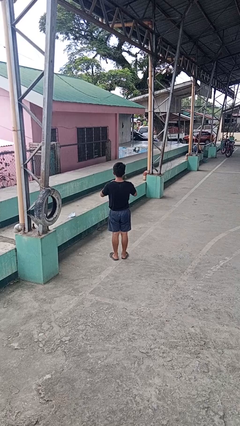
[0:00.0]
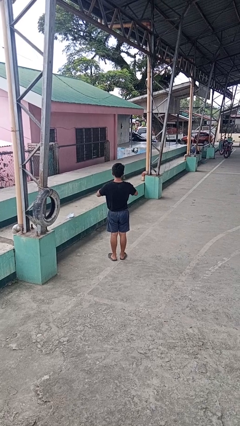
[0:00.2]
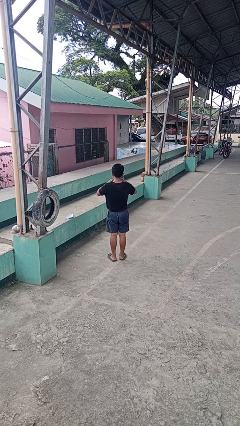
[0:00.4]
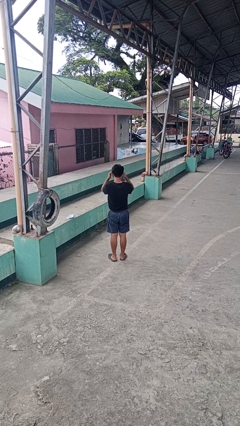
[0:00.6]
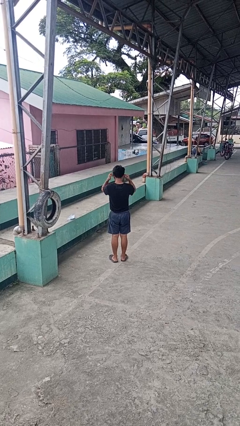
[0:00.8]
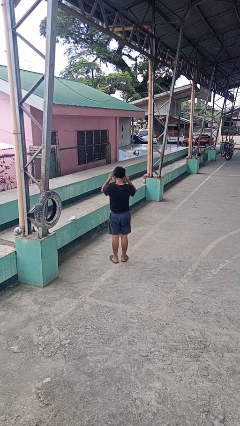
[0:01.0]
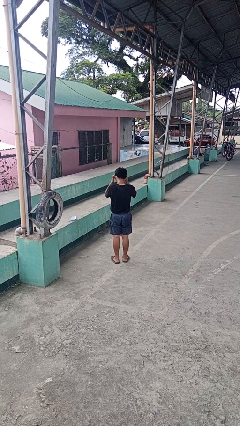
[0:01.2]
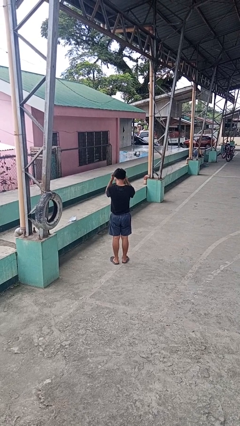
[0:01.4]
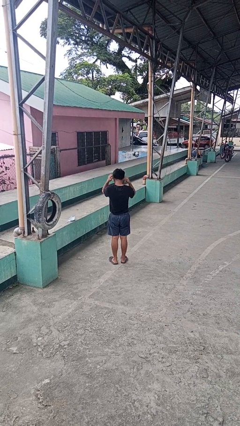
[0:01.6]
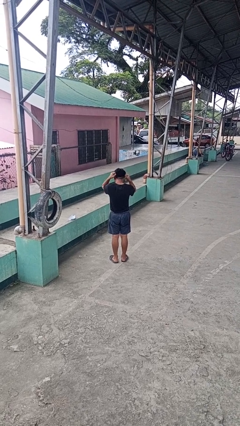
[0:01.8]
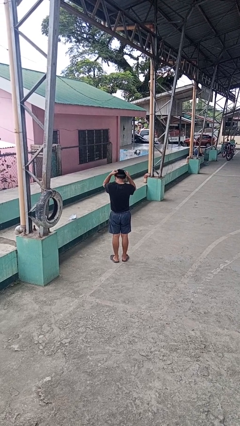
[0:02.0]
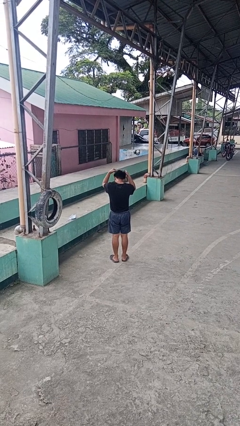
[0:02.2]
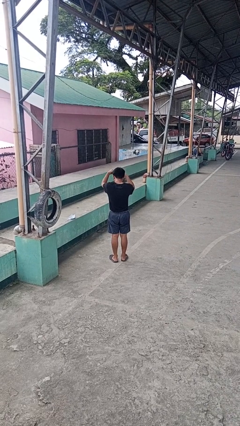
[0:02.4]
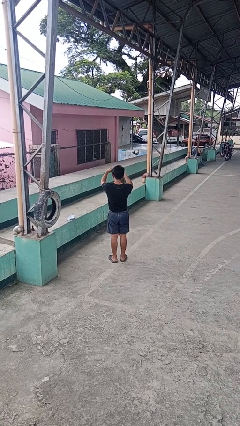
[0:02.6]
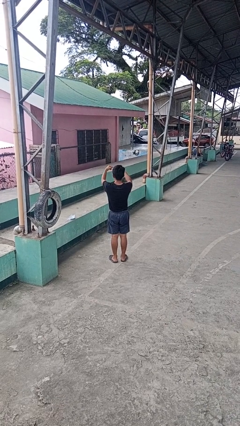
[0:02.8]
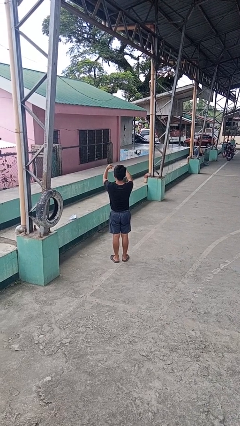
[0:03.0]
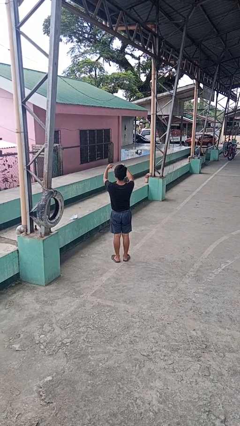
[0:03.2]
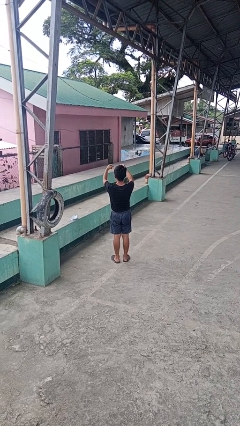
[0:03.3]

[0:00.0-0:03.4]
person takes off necklace

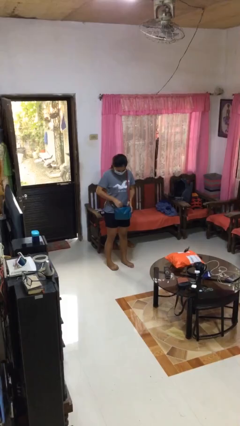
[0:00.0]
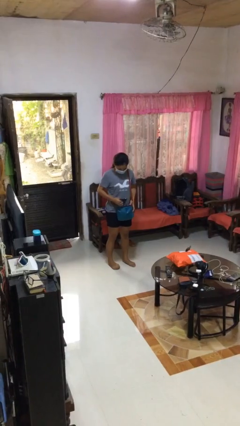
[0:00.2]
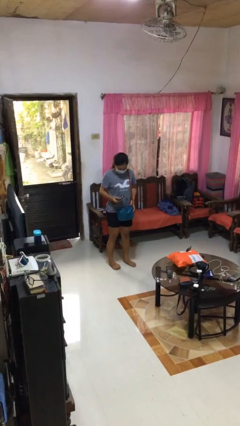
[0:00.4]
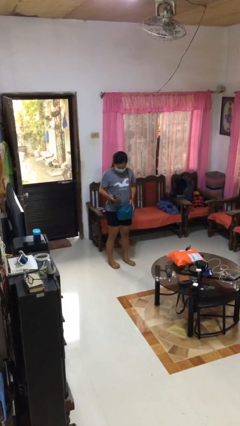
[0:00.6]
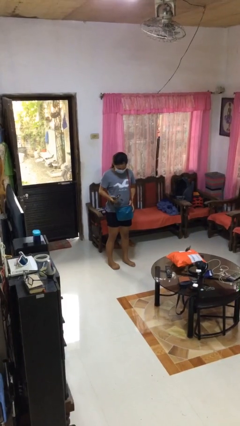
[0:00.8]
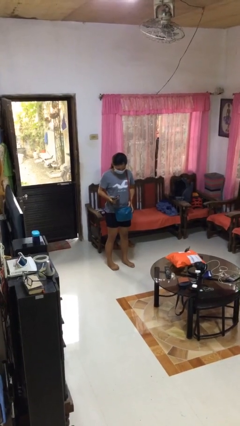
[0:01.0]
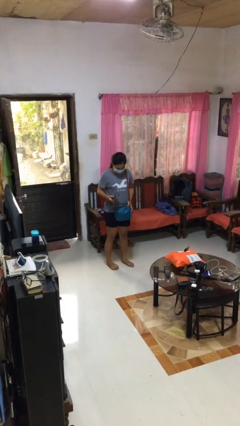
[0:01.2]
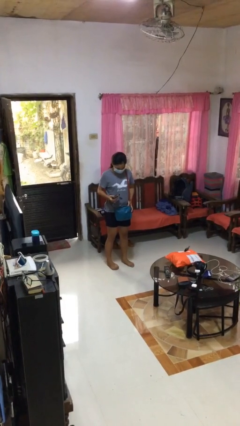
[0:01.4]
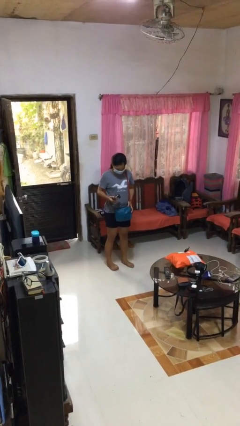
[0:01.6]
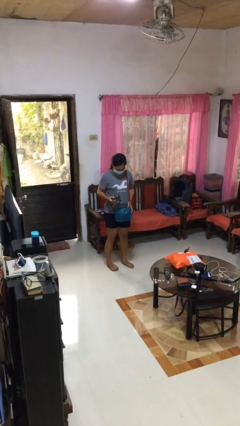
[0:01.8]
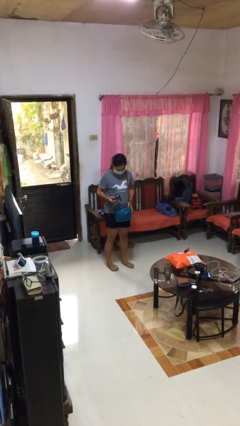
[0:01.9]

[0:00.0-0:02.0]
person takes object from purse

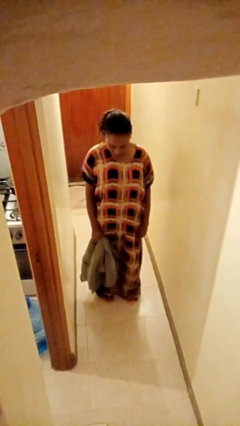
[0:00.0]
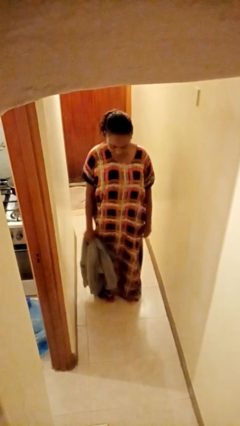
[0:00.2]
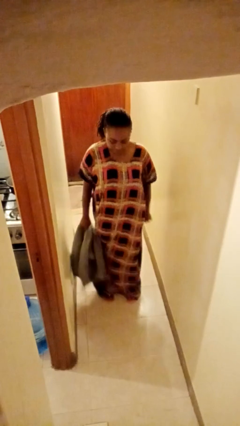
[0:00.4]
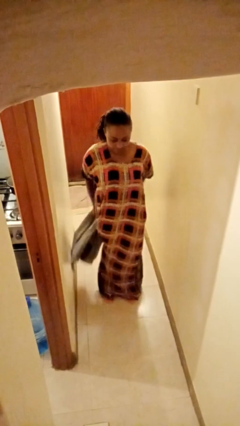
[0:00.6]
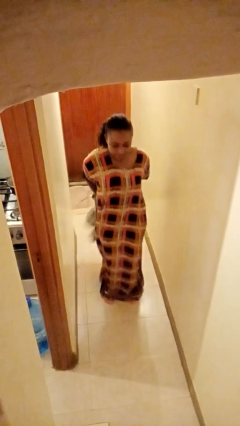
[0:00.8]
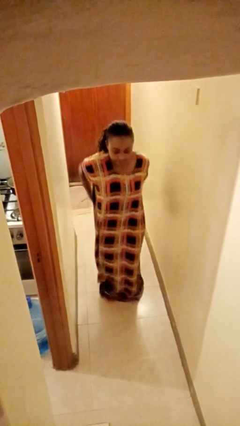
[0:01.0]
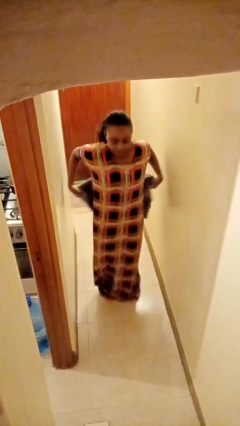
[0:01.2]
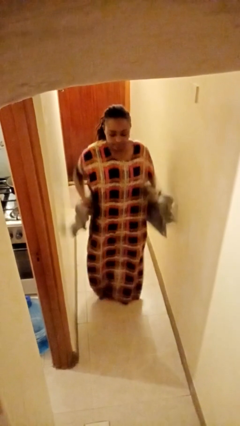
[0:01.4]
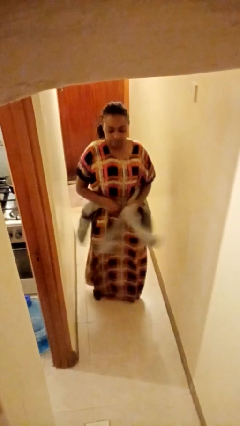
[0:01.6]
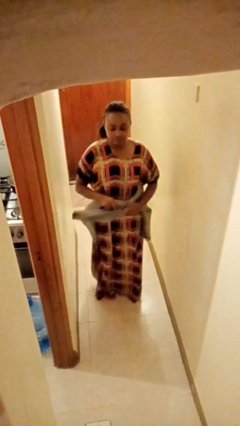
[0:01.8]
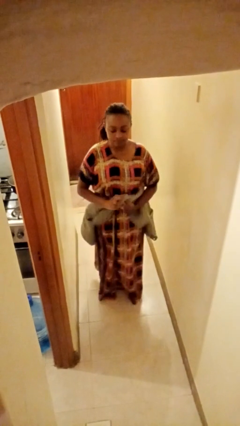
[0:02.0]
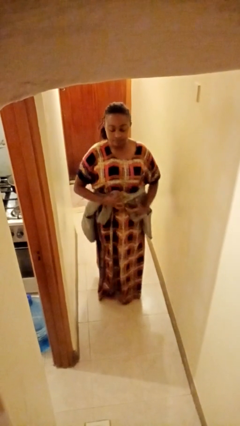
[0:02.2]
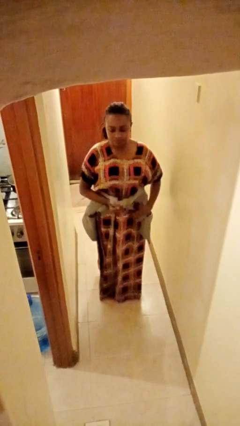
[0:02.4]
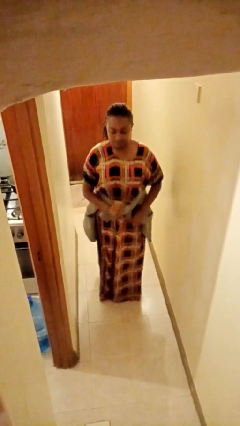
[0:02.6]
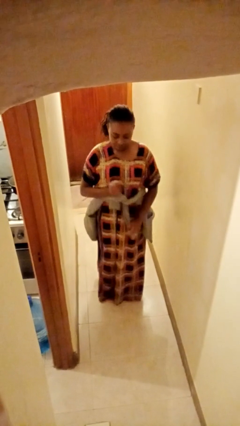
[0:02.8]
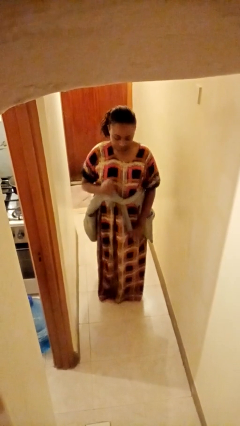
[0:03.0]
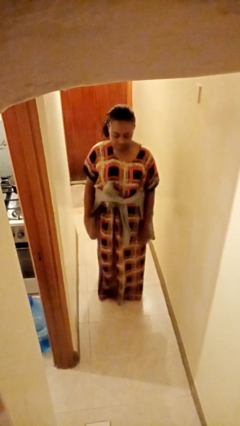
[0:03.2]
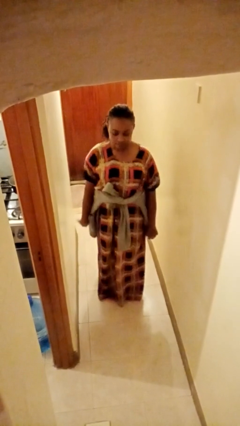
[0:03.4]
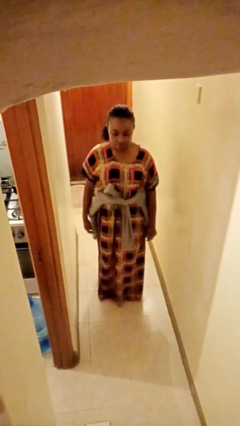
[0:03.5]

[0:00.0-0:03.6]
person ties jacket around waist

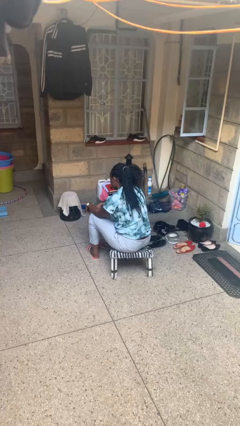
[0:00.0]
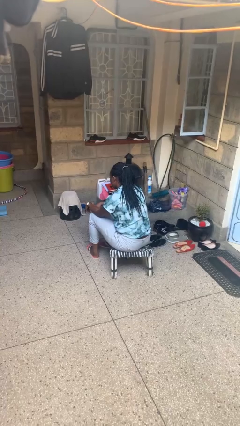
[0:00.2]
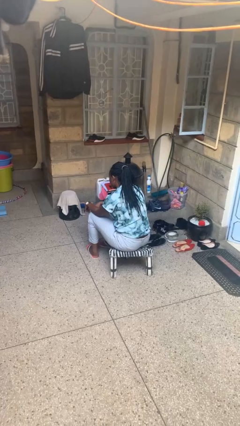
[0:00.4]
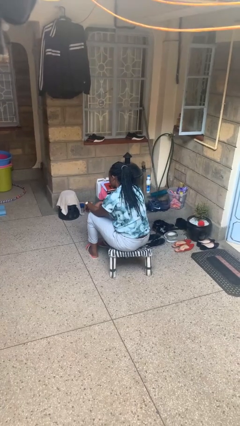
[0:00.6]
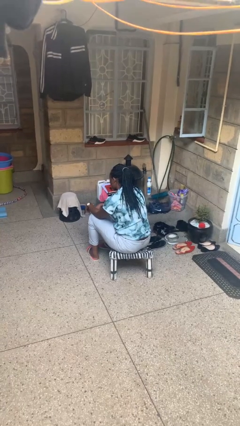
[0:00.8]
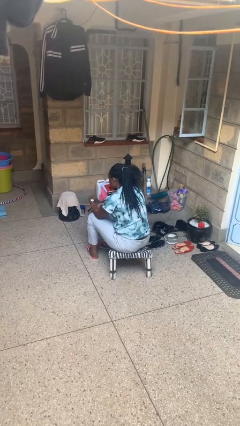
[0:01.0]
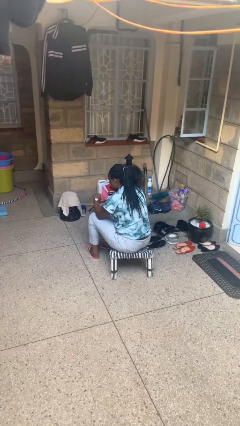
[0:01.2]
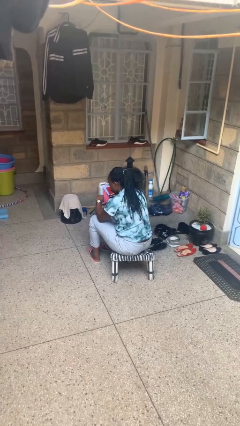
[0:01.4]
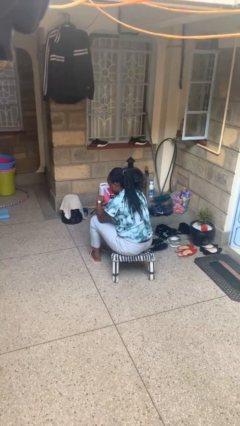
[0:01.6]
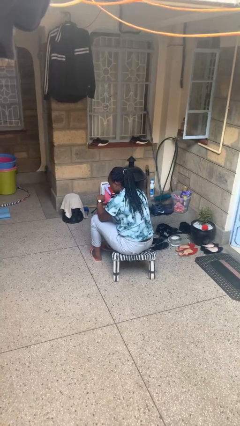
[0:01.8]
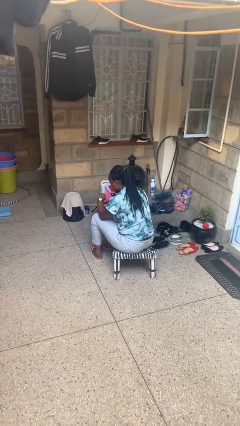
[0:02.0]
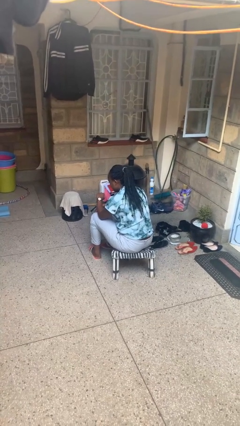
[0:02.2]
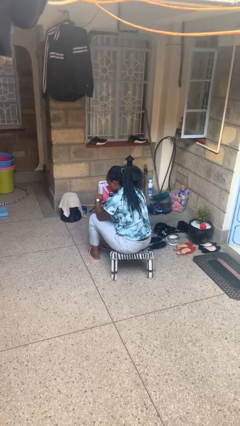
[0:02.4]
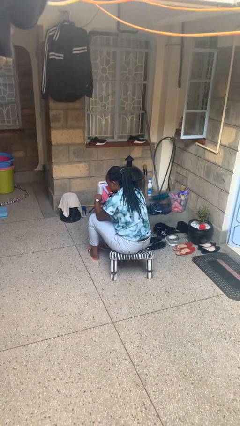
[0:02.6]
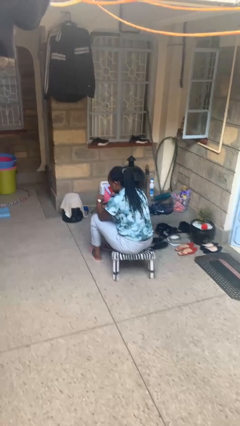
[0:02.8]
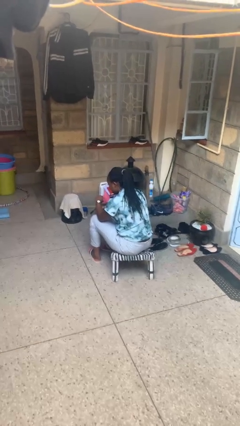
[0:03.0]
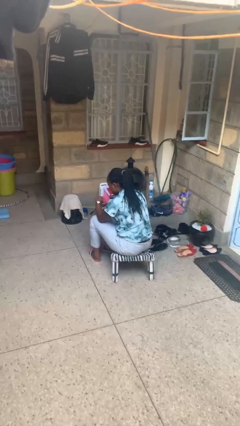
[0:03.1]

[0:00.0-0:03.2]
person looks at wristwatch

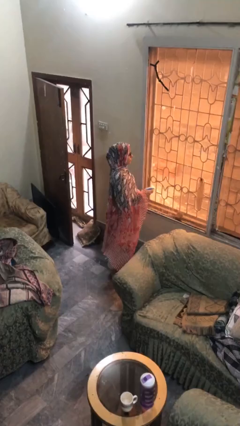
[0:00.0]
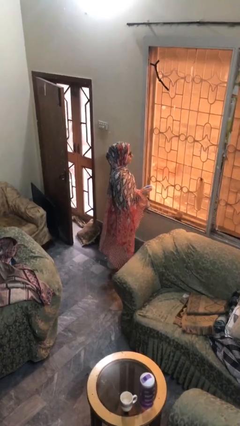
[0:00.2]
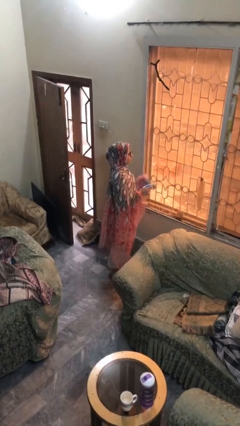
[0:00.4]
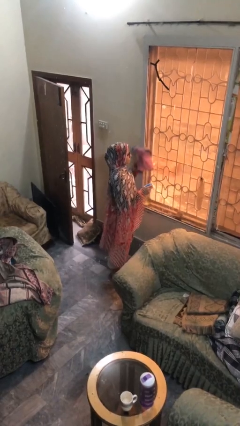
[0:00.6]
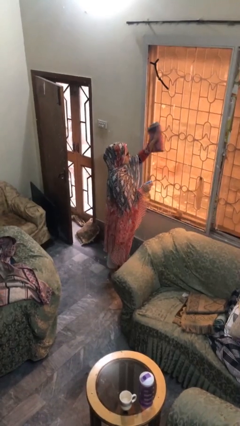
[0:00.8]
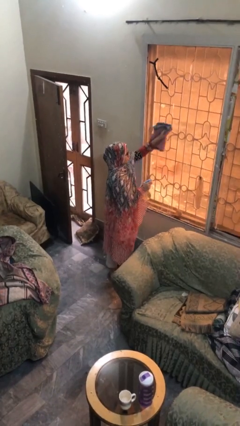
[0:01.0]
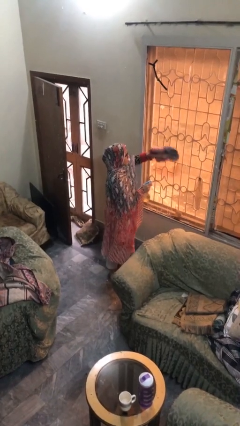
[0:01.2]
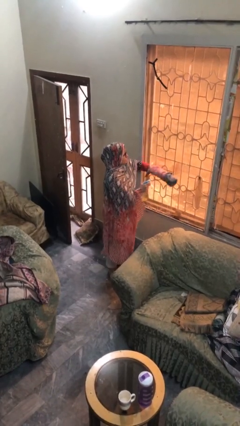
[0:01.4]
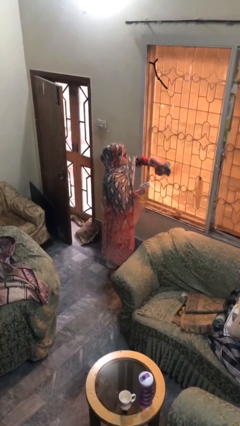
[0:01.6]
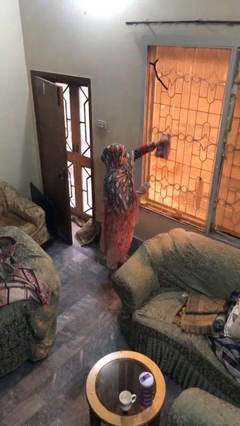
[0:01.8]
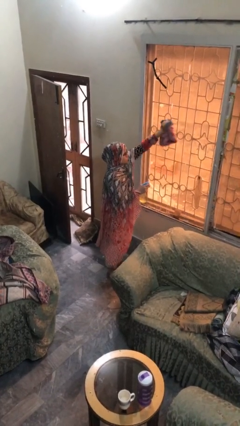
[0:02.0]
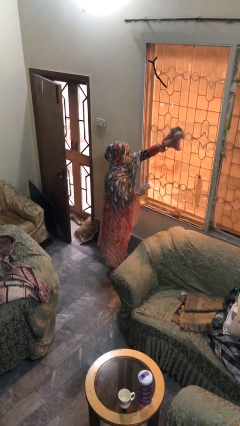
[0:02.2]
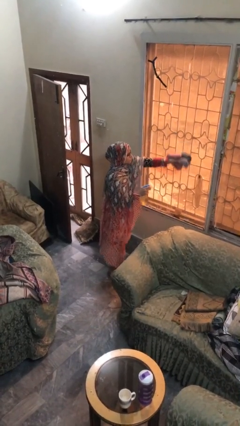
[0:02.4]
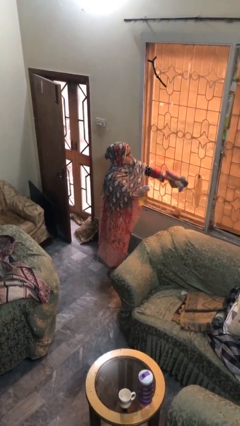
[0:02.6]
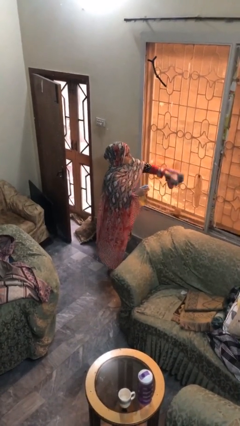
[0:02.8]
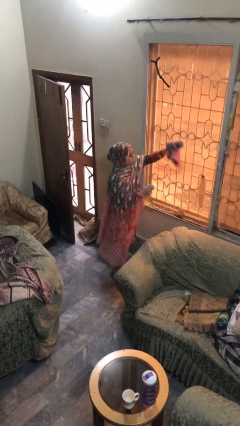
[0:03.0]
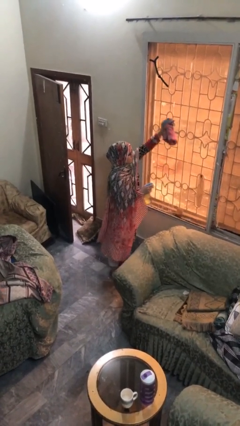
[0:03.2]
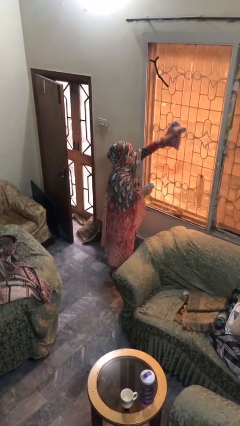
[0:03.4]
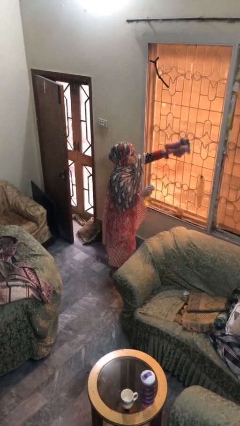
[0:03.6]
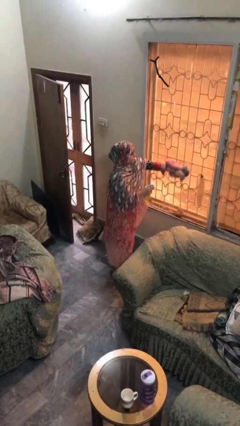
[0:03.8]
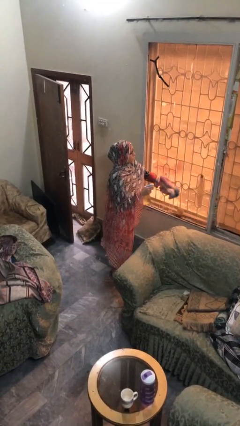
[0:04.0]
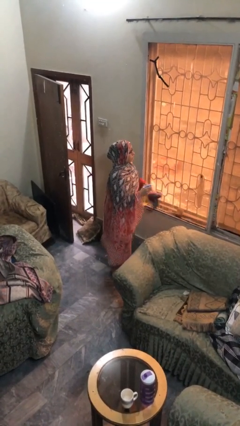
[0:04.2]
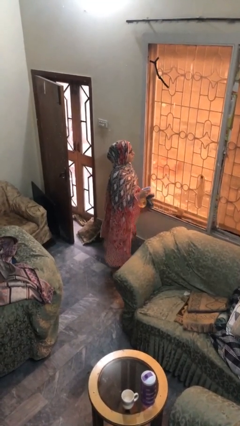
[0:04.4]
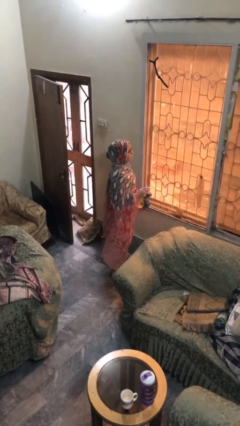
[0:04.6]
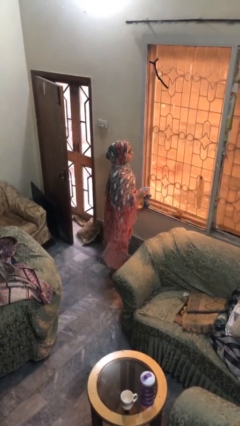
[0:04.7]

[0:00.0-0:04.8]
person washes window

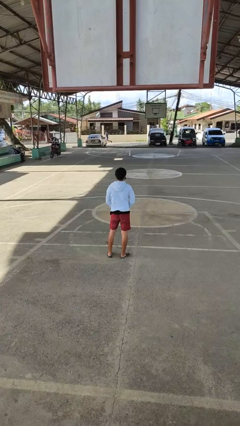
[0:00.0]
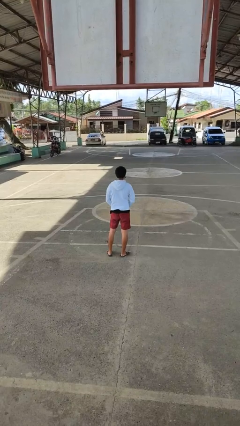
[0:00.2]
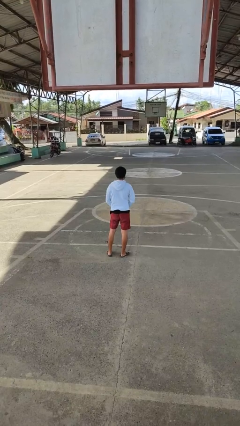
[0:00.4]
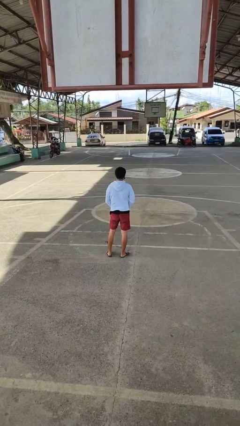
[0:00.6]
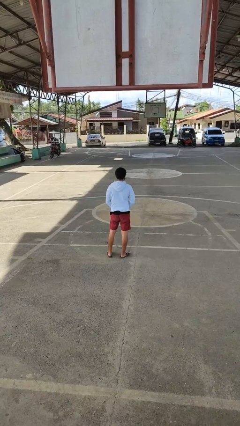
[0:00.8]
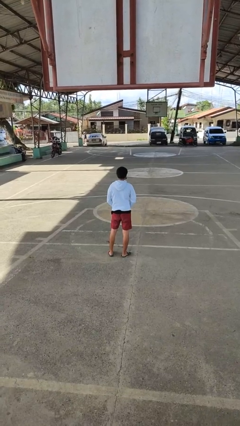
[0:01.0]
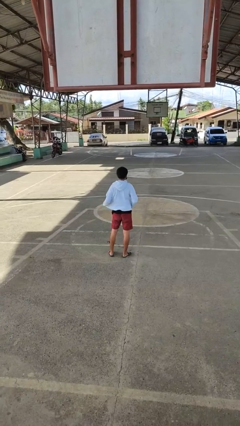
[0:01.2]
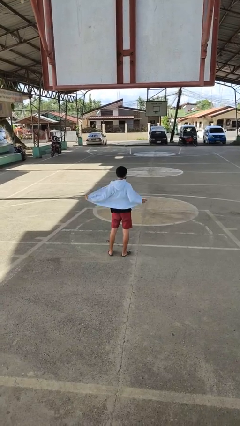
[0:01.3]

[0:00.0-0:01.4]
person unzips jacket
